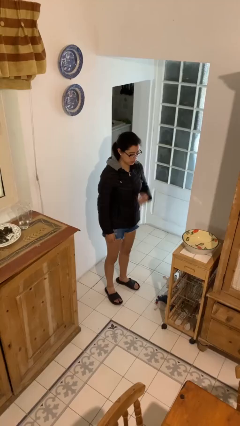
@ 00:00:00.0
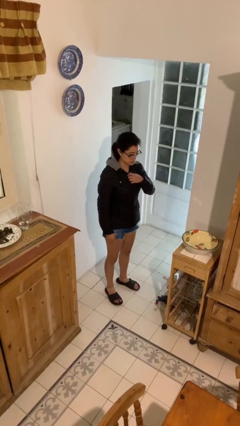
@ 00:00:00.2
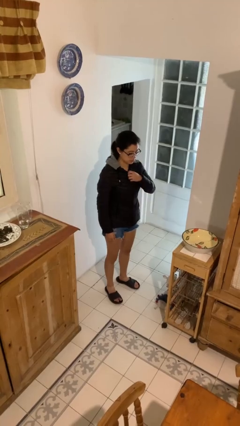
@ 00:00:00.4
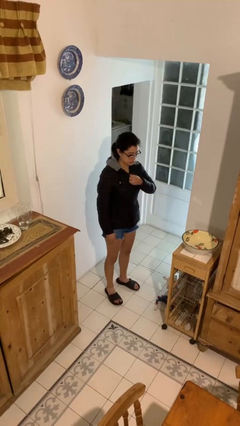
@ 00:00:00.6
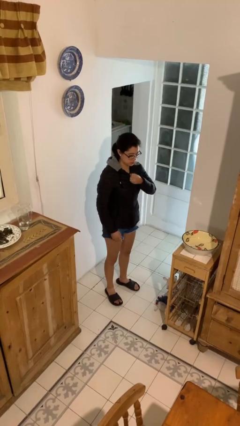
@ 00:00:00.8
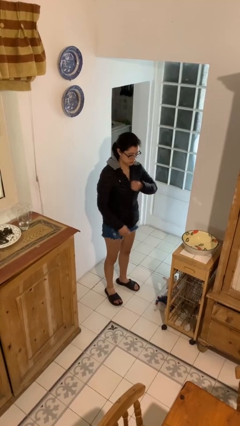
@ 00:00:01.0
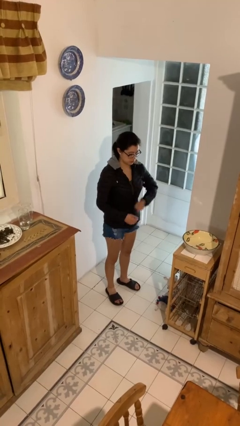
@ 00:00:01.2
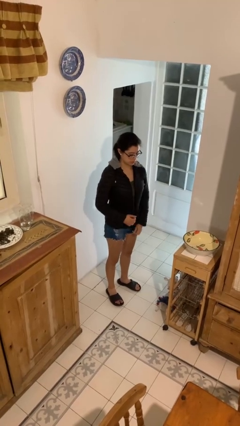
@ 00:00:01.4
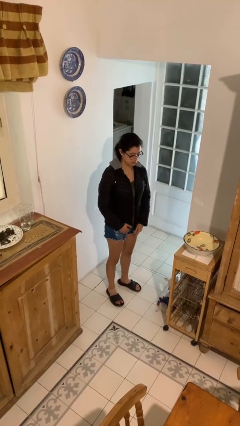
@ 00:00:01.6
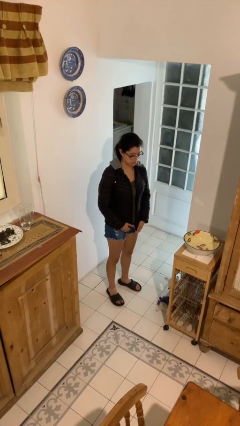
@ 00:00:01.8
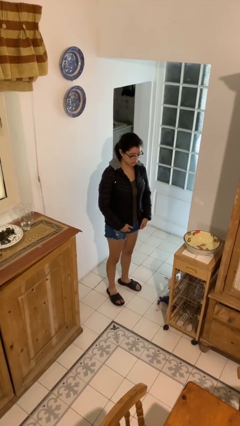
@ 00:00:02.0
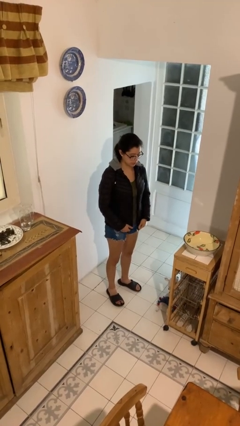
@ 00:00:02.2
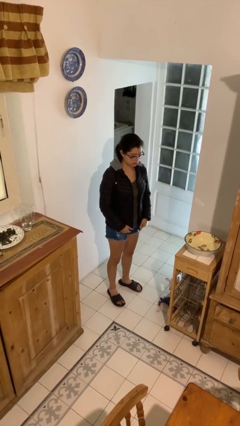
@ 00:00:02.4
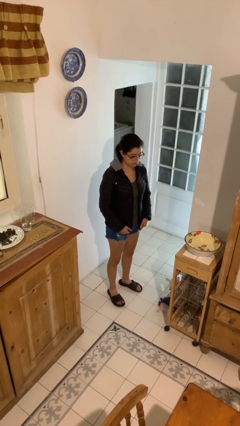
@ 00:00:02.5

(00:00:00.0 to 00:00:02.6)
person unzips jacket

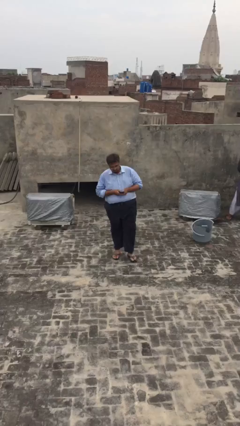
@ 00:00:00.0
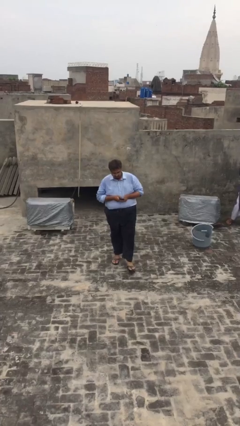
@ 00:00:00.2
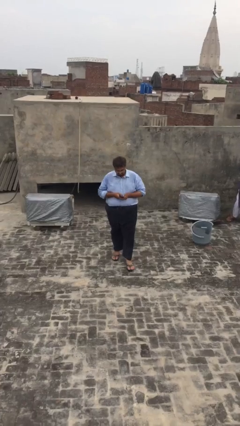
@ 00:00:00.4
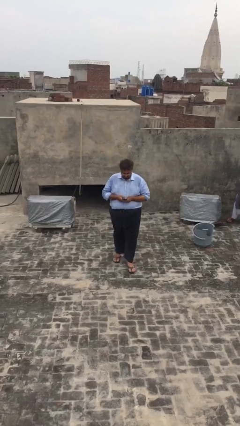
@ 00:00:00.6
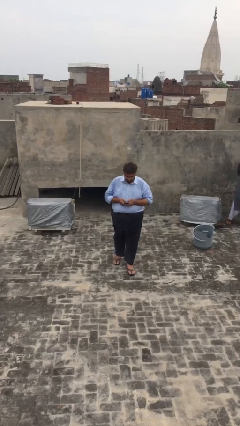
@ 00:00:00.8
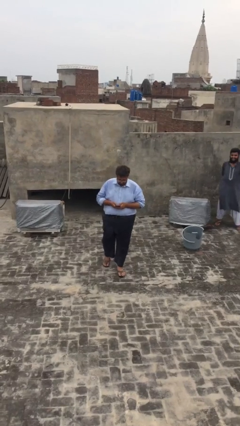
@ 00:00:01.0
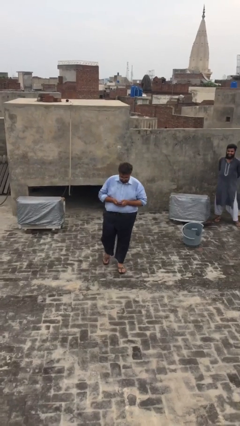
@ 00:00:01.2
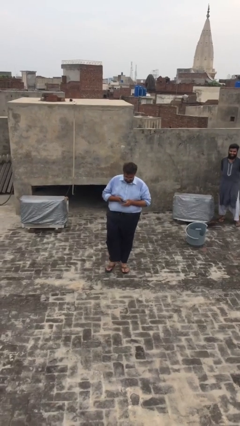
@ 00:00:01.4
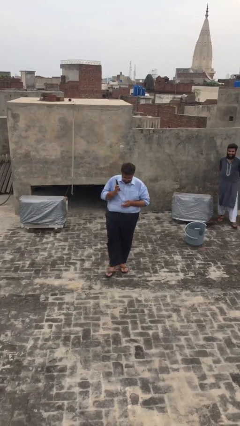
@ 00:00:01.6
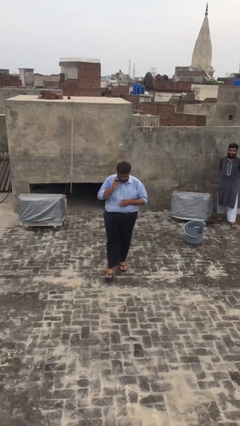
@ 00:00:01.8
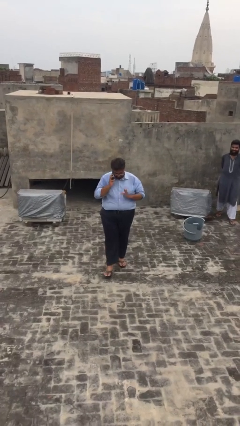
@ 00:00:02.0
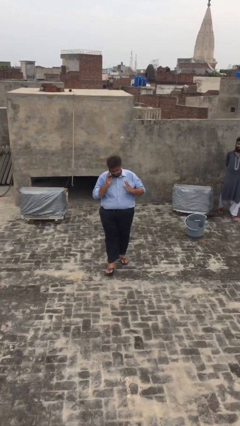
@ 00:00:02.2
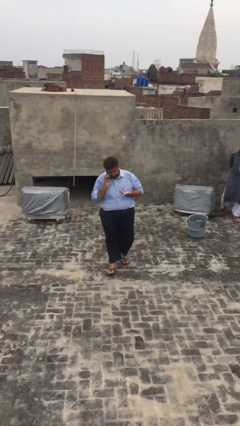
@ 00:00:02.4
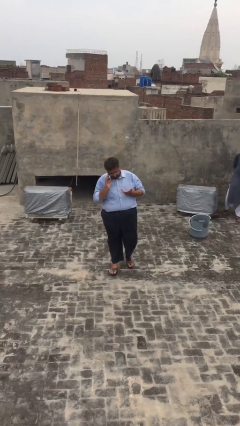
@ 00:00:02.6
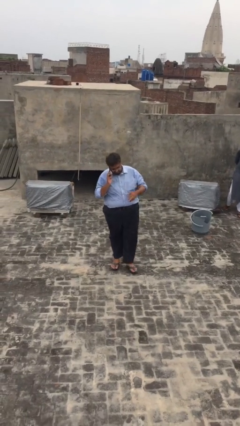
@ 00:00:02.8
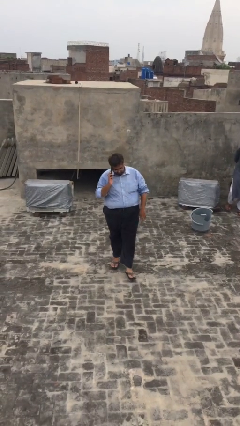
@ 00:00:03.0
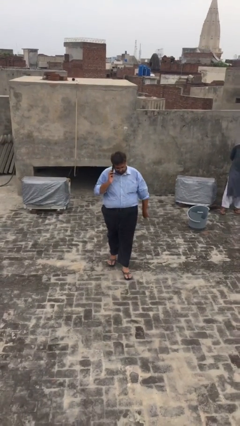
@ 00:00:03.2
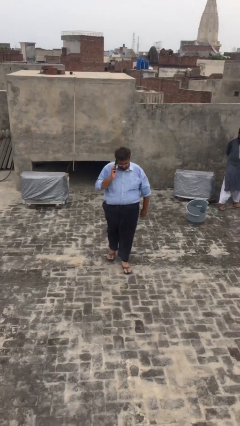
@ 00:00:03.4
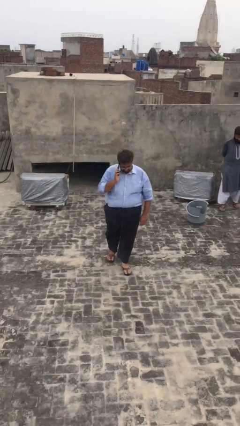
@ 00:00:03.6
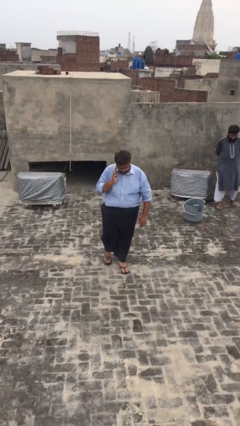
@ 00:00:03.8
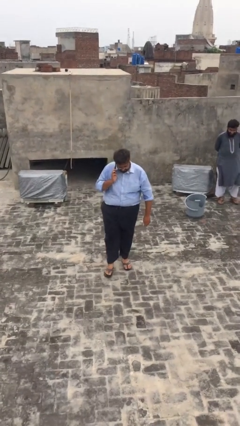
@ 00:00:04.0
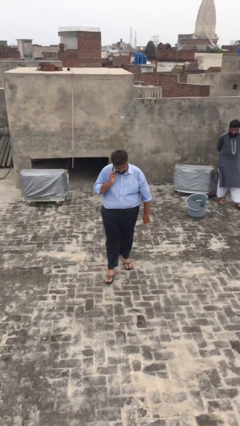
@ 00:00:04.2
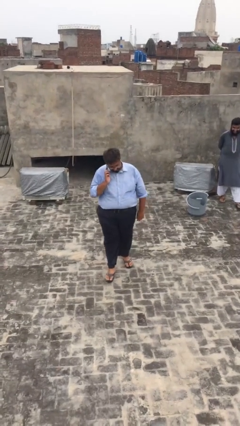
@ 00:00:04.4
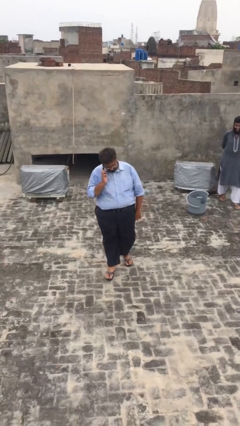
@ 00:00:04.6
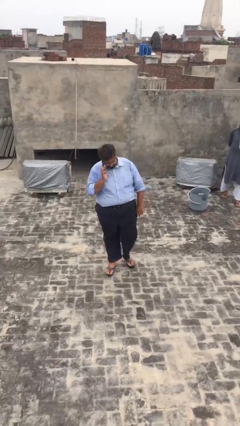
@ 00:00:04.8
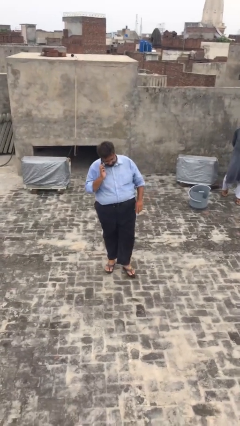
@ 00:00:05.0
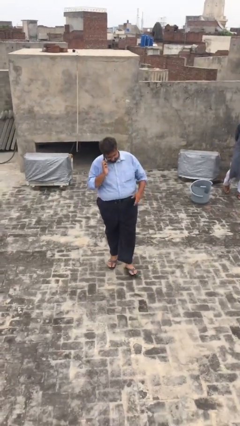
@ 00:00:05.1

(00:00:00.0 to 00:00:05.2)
person talks on phone

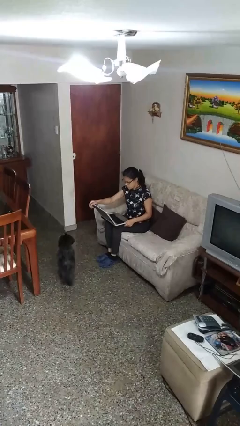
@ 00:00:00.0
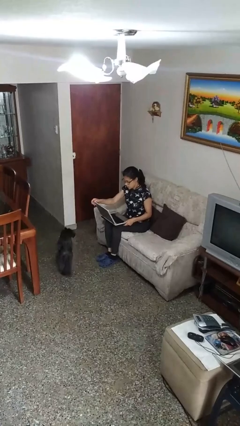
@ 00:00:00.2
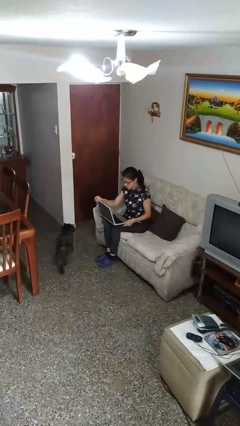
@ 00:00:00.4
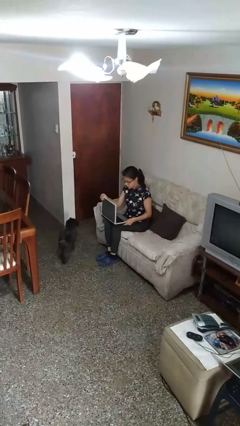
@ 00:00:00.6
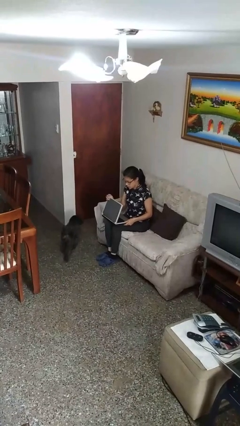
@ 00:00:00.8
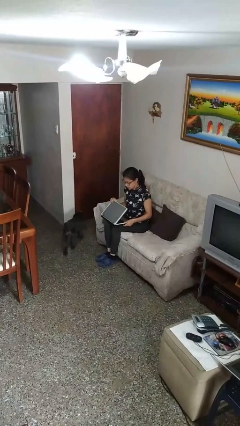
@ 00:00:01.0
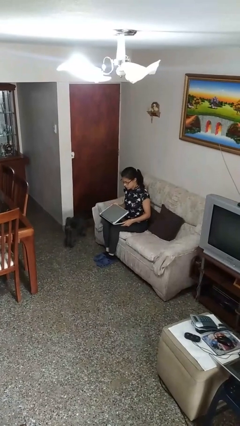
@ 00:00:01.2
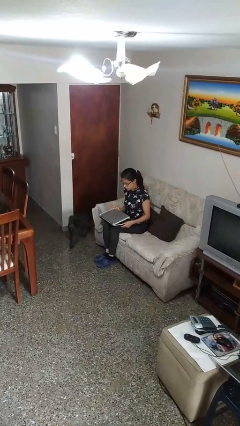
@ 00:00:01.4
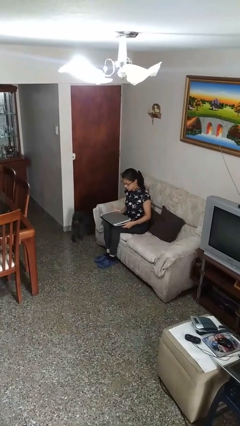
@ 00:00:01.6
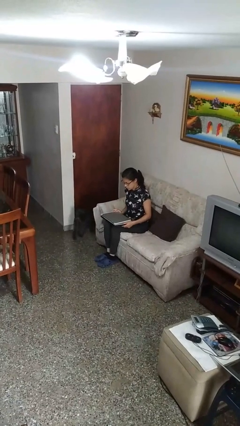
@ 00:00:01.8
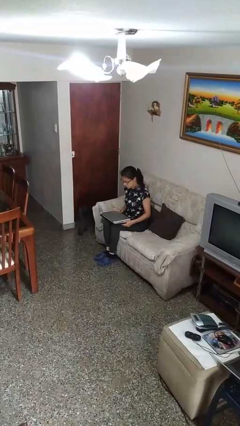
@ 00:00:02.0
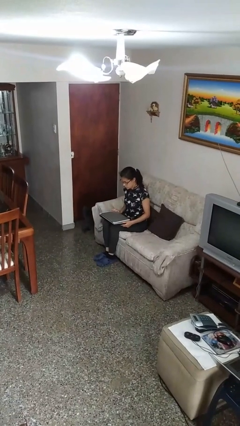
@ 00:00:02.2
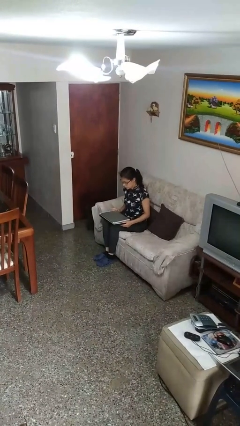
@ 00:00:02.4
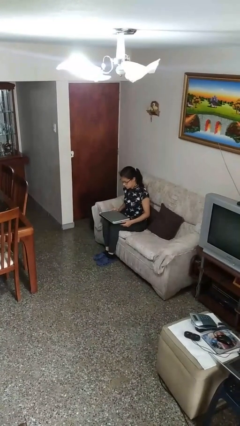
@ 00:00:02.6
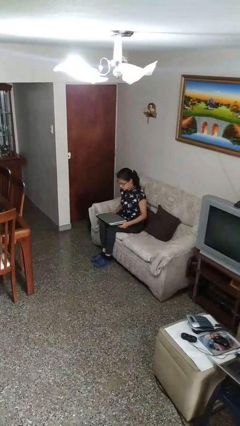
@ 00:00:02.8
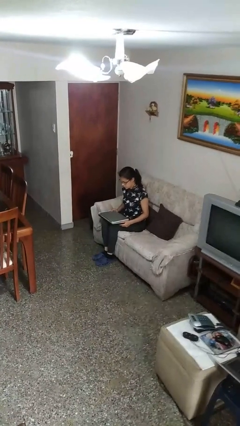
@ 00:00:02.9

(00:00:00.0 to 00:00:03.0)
person closes laptop

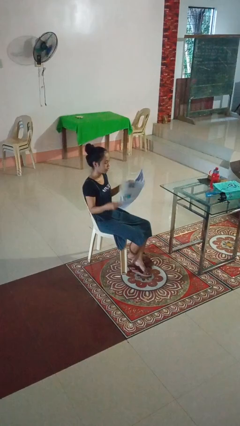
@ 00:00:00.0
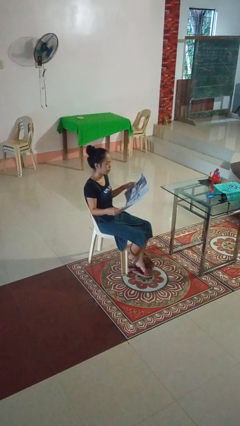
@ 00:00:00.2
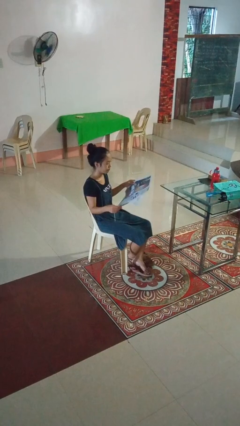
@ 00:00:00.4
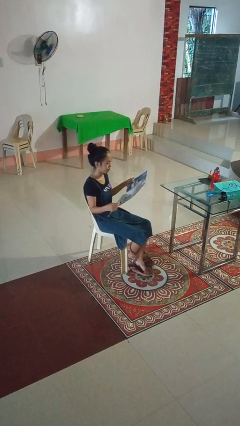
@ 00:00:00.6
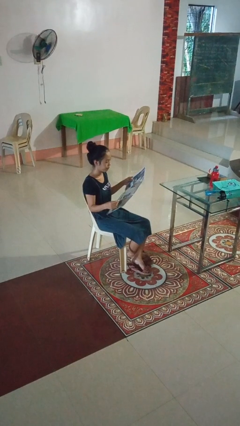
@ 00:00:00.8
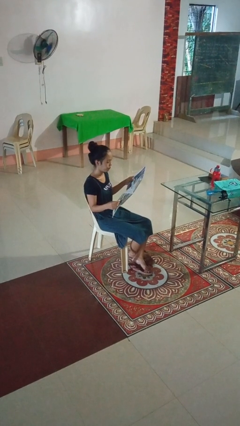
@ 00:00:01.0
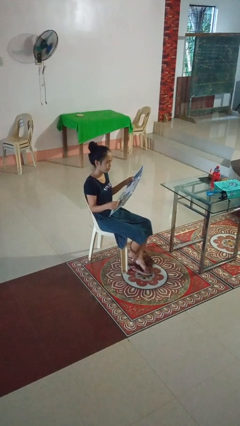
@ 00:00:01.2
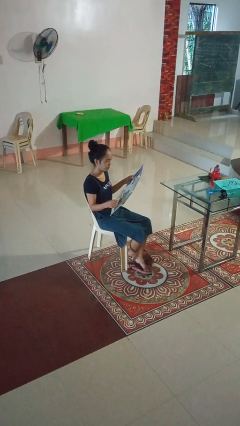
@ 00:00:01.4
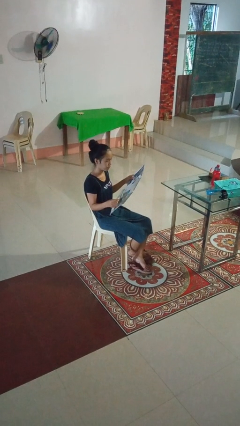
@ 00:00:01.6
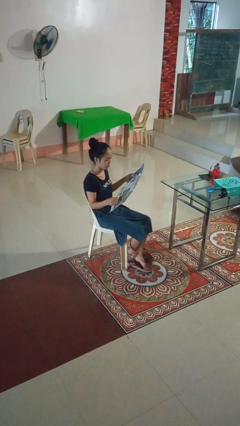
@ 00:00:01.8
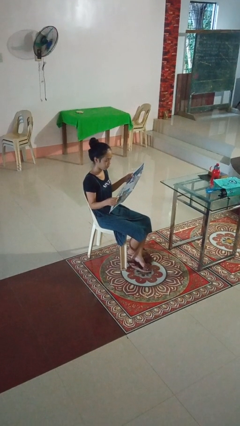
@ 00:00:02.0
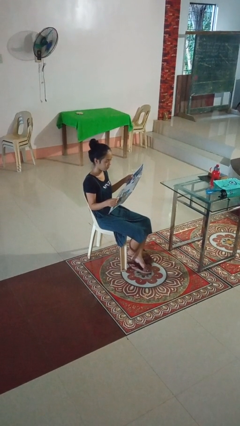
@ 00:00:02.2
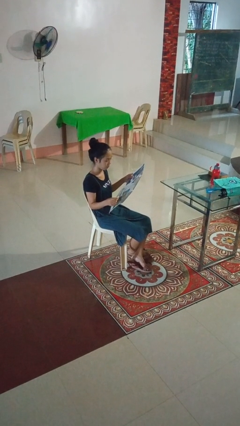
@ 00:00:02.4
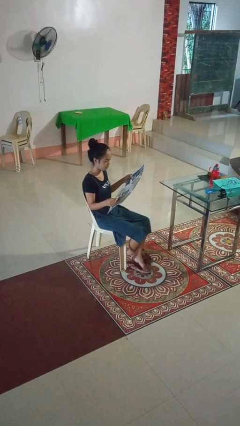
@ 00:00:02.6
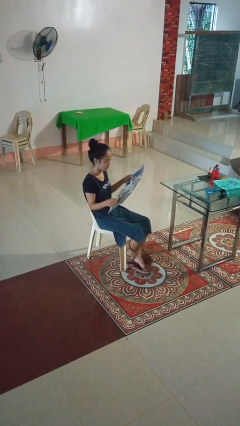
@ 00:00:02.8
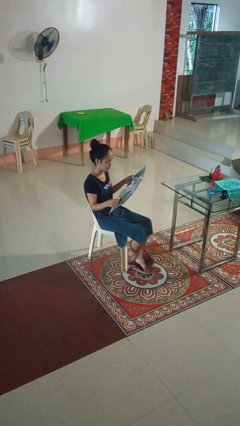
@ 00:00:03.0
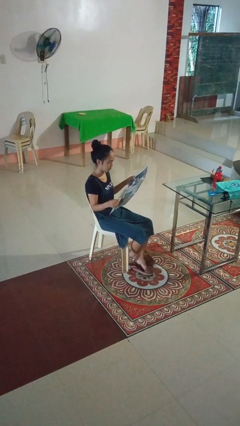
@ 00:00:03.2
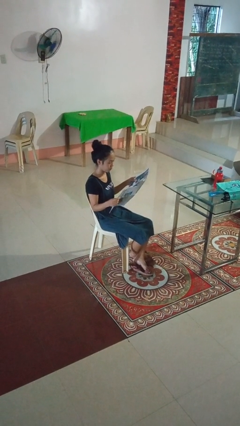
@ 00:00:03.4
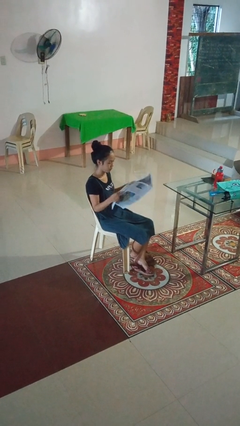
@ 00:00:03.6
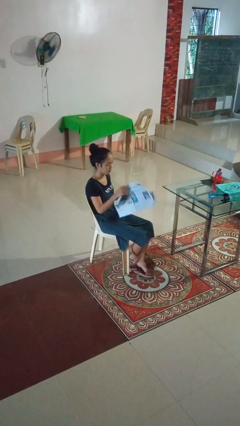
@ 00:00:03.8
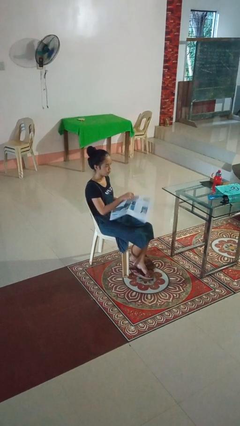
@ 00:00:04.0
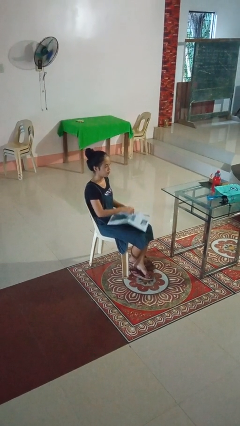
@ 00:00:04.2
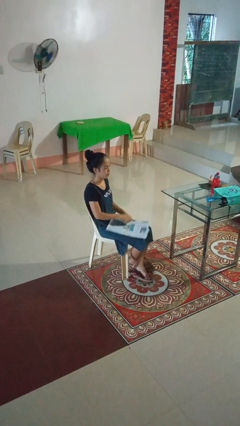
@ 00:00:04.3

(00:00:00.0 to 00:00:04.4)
person reads newspaper

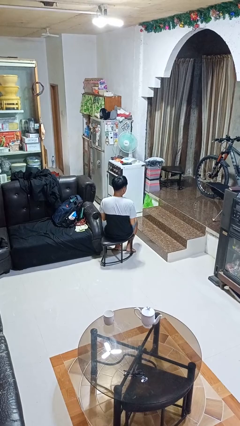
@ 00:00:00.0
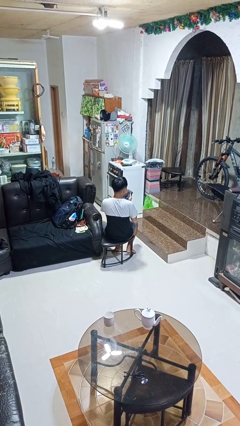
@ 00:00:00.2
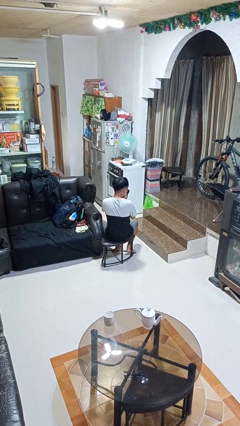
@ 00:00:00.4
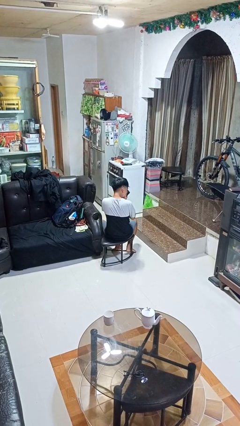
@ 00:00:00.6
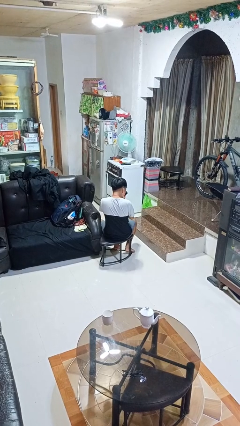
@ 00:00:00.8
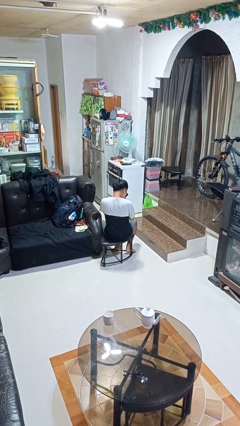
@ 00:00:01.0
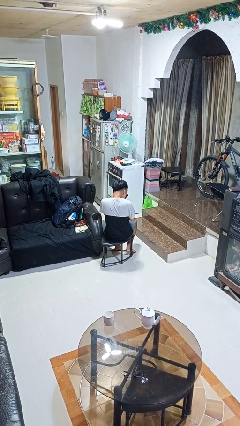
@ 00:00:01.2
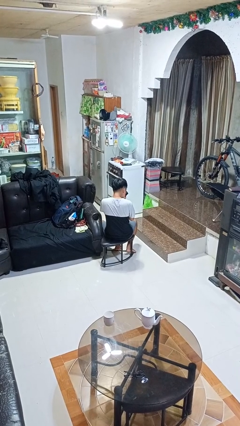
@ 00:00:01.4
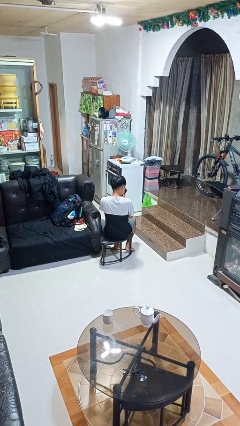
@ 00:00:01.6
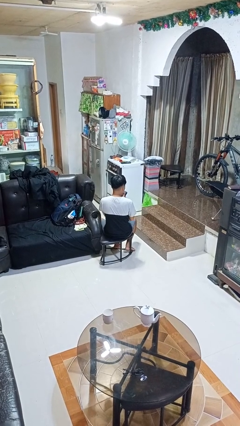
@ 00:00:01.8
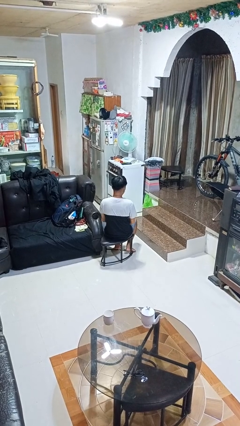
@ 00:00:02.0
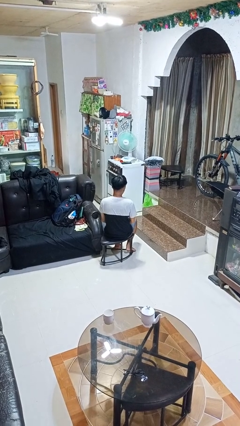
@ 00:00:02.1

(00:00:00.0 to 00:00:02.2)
person blows nose
